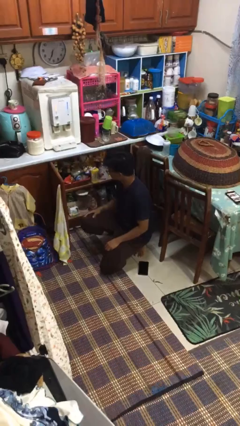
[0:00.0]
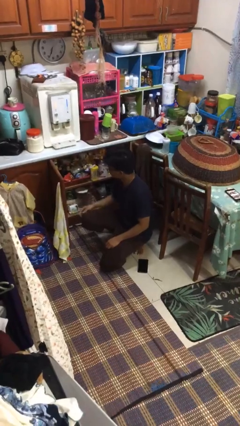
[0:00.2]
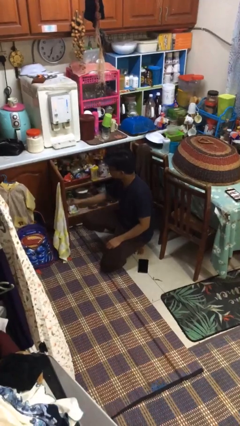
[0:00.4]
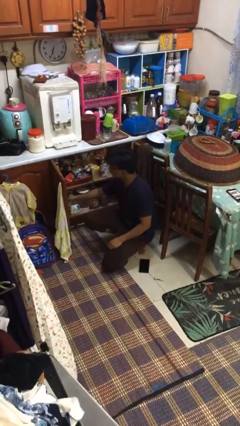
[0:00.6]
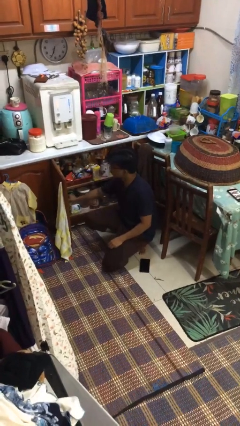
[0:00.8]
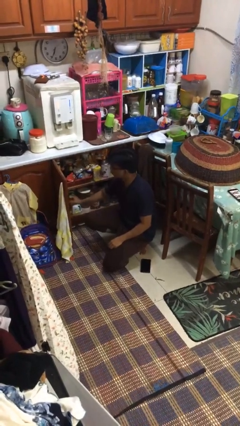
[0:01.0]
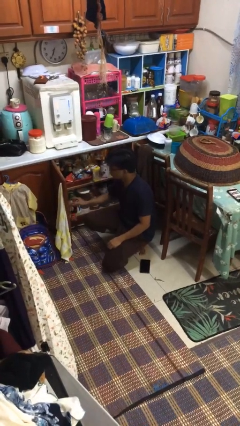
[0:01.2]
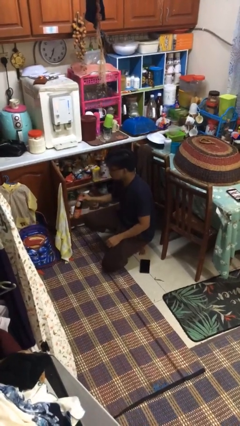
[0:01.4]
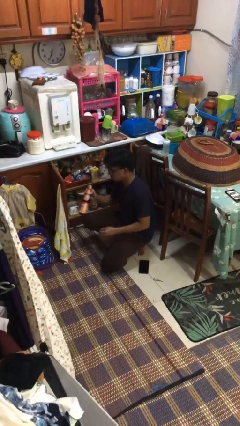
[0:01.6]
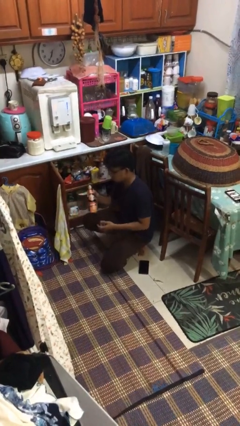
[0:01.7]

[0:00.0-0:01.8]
person takes object from cabinet

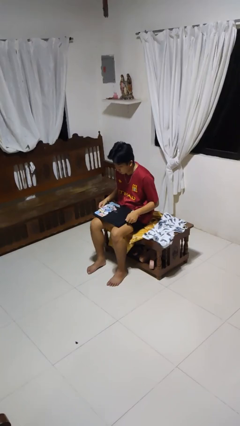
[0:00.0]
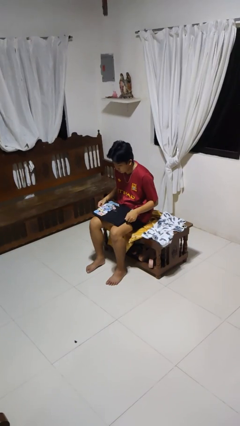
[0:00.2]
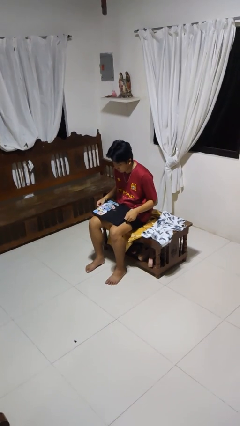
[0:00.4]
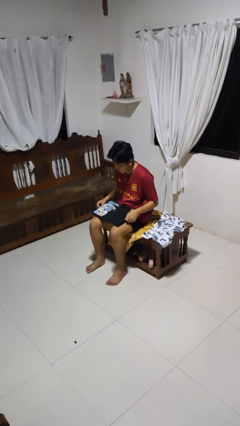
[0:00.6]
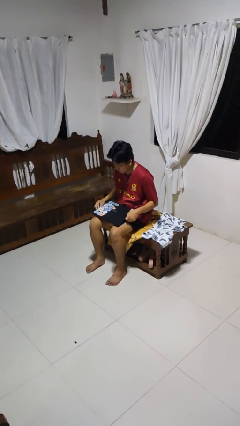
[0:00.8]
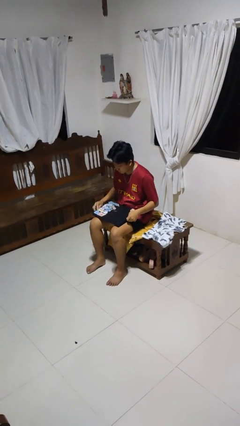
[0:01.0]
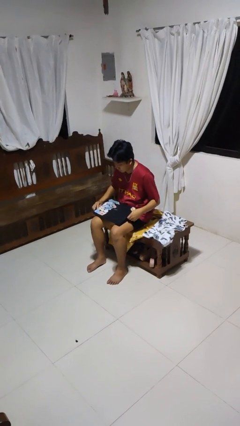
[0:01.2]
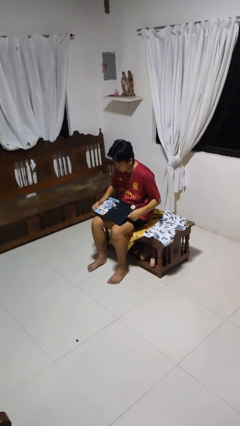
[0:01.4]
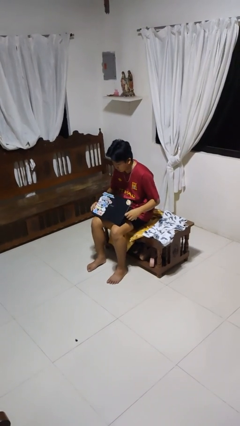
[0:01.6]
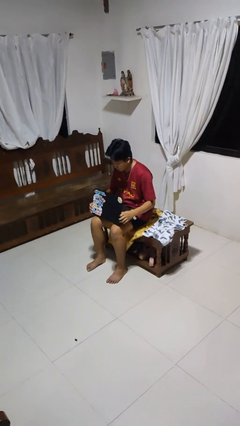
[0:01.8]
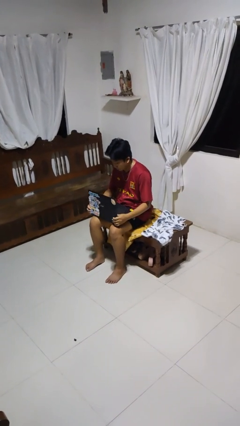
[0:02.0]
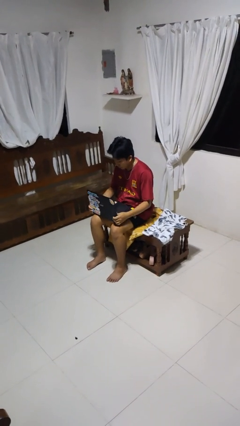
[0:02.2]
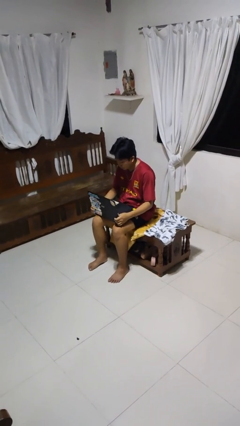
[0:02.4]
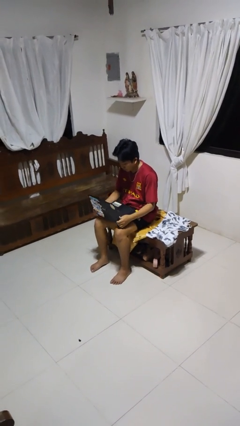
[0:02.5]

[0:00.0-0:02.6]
person opens laptop

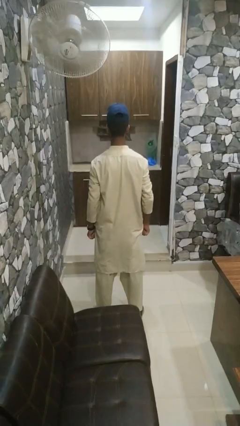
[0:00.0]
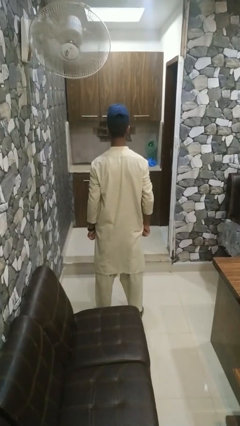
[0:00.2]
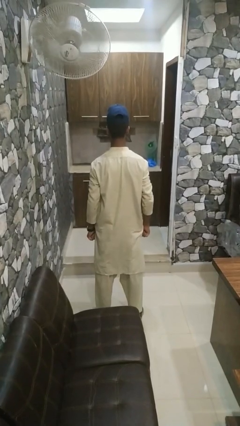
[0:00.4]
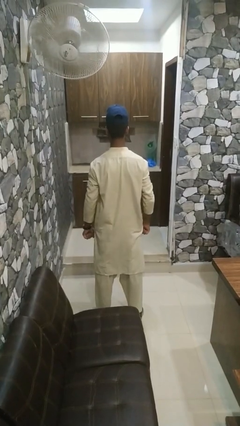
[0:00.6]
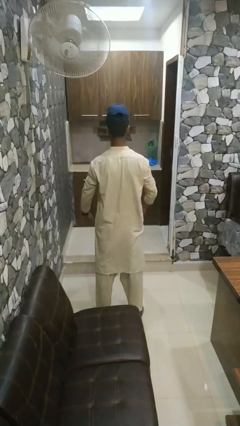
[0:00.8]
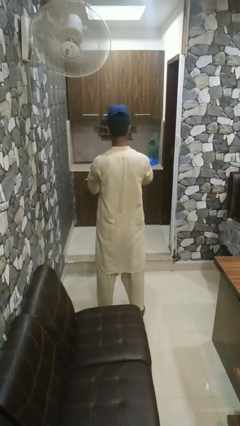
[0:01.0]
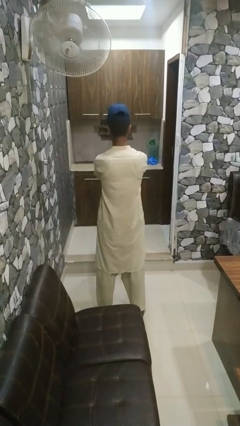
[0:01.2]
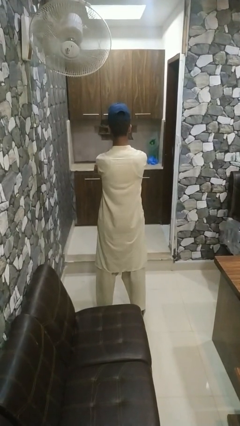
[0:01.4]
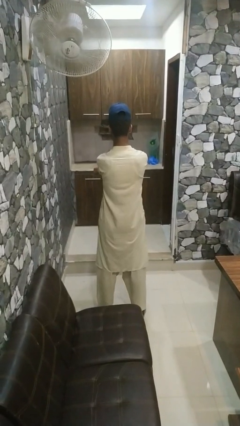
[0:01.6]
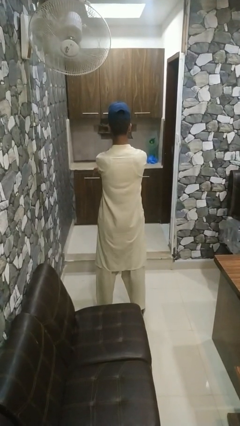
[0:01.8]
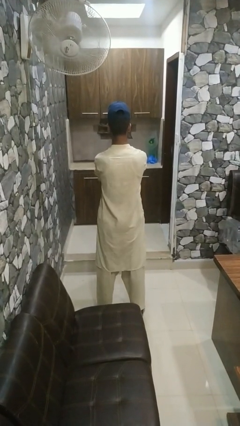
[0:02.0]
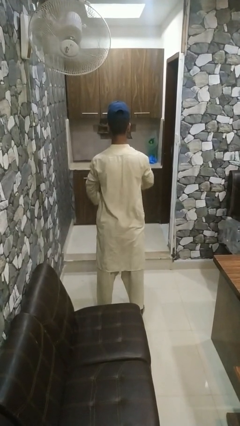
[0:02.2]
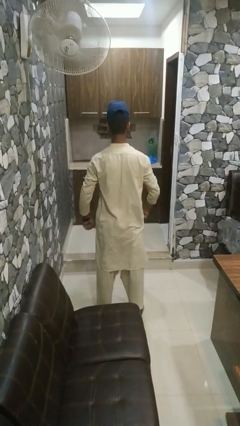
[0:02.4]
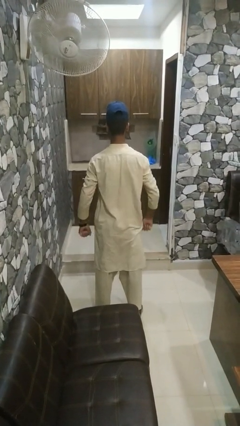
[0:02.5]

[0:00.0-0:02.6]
person crosses arms

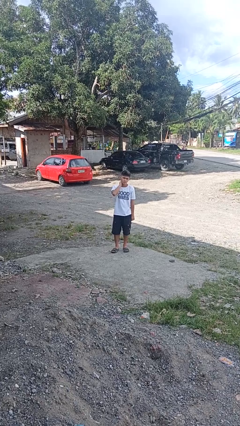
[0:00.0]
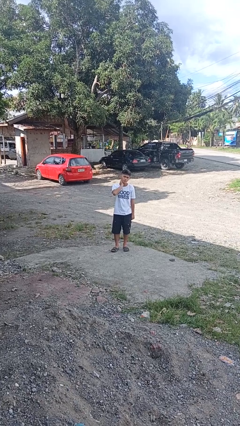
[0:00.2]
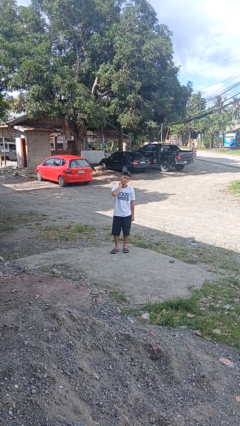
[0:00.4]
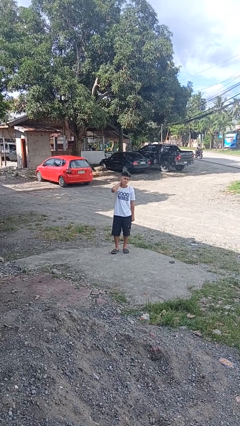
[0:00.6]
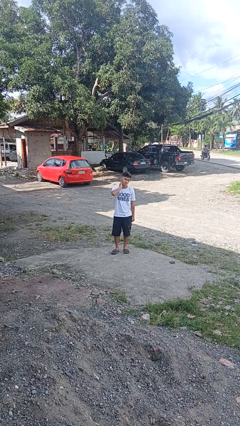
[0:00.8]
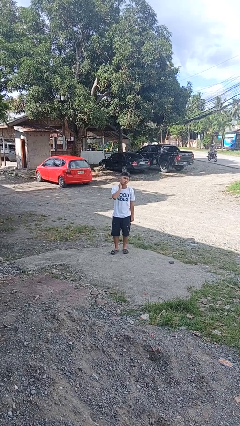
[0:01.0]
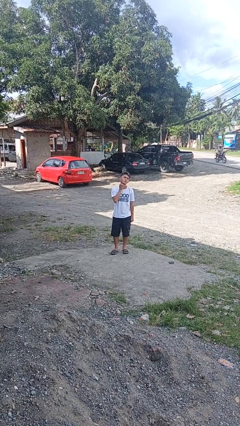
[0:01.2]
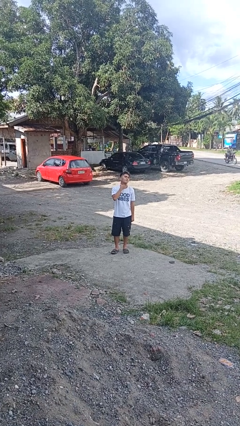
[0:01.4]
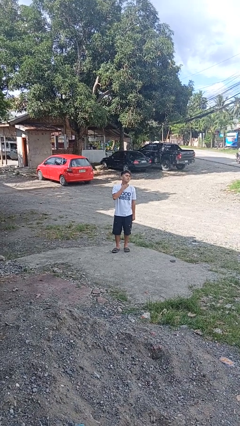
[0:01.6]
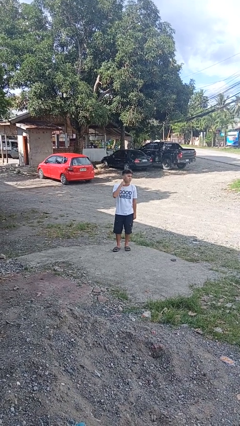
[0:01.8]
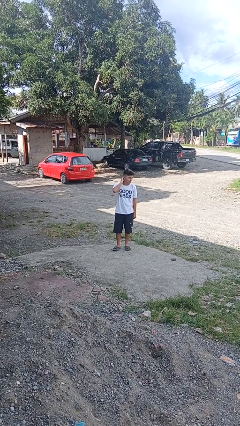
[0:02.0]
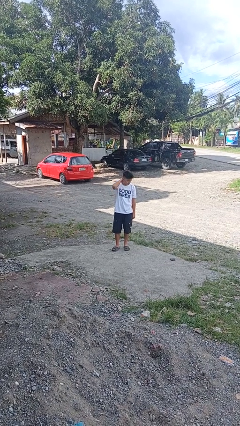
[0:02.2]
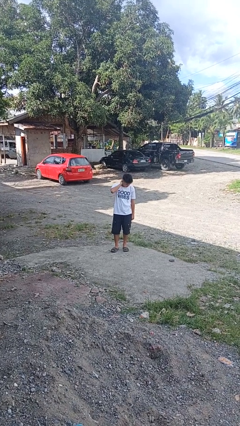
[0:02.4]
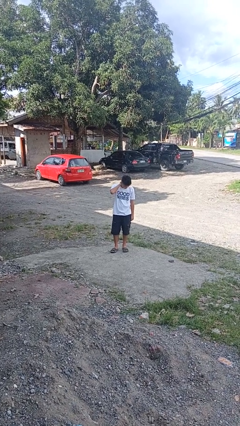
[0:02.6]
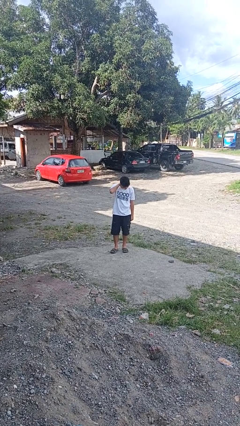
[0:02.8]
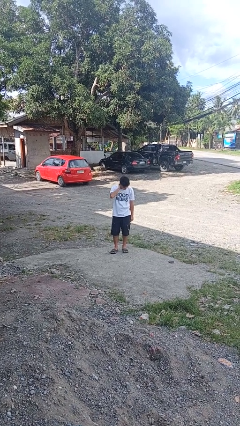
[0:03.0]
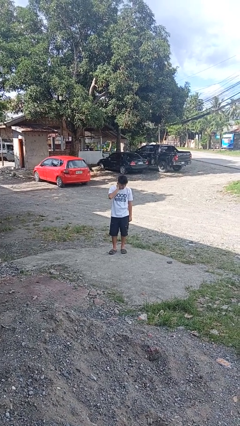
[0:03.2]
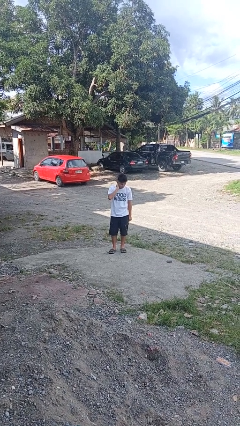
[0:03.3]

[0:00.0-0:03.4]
person rubs neck

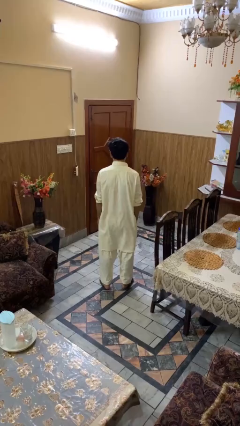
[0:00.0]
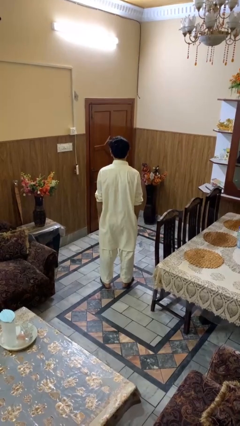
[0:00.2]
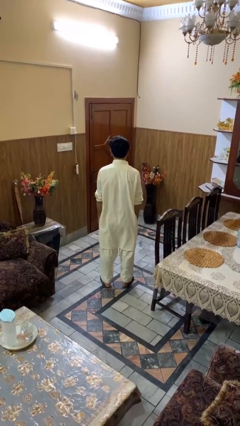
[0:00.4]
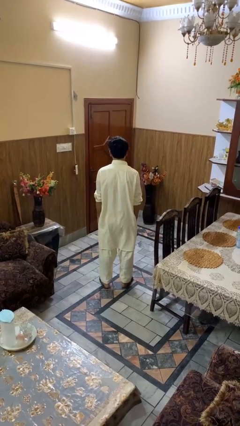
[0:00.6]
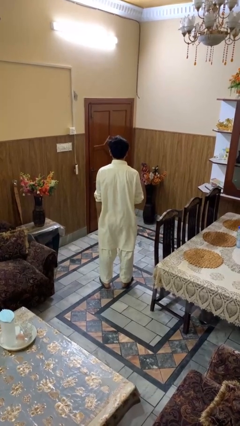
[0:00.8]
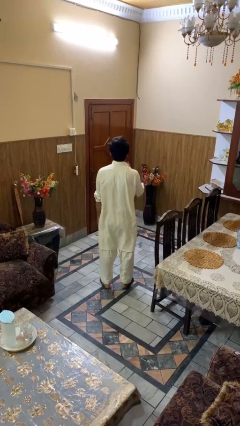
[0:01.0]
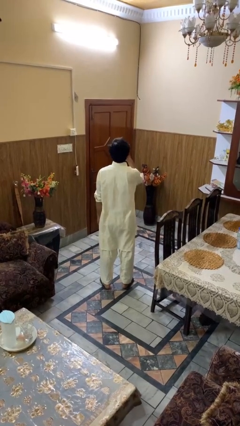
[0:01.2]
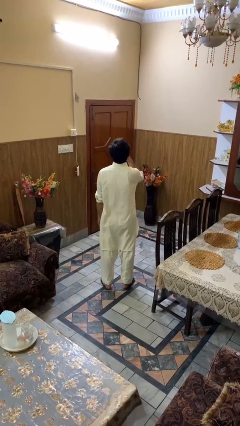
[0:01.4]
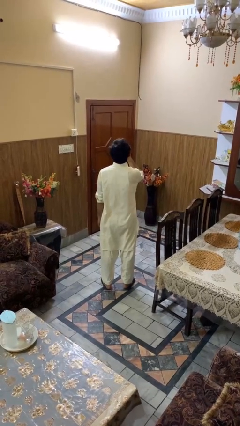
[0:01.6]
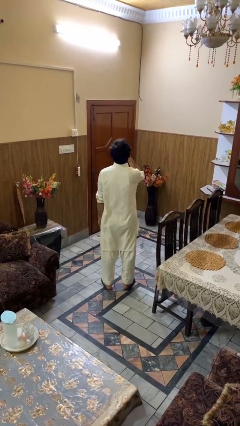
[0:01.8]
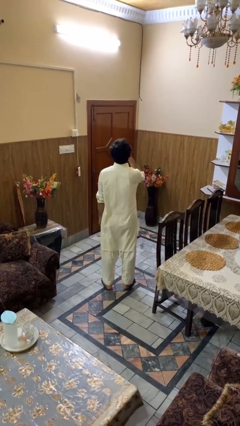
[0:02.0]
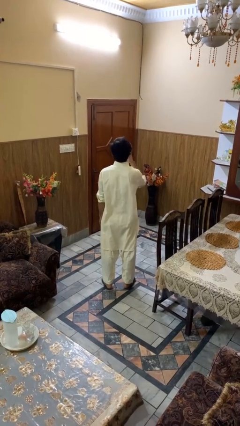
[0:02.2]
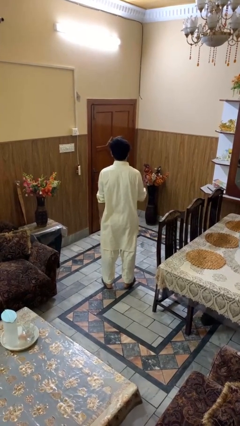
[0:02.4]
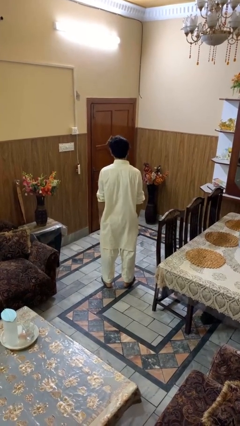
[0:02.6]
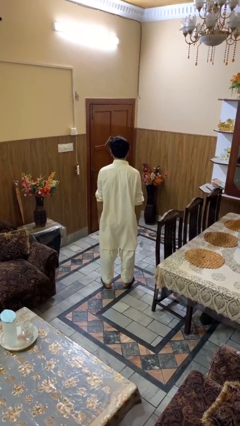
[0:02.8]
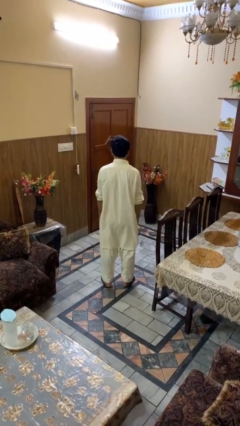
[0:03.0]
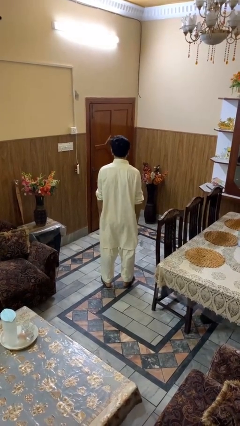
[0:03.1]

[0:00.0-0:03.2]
person yawns

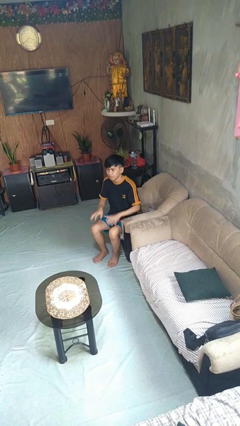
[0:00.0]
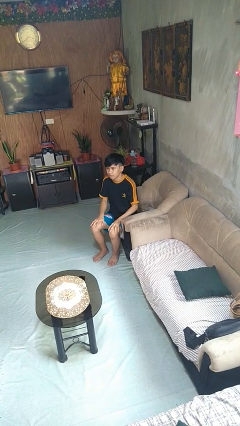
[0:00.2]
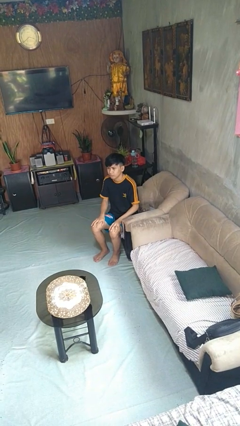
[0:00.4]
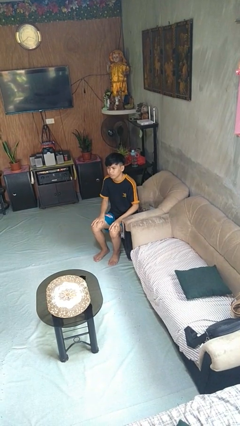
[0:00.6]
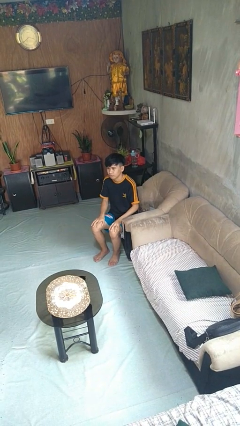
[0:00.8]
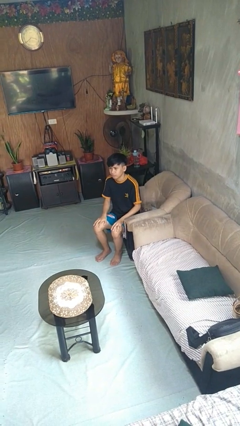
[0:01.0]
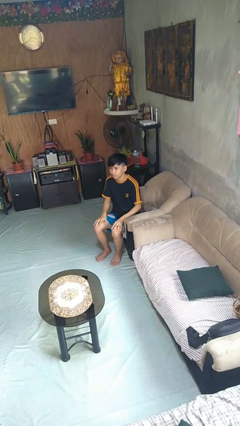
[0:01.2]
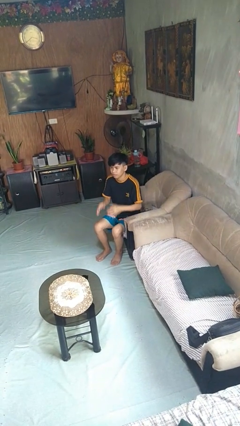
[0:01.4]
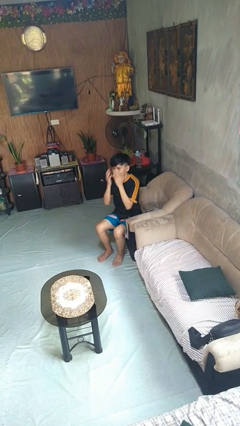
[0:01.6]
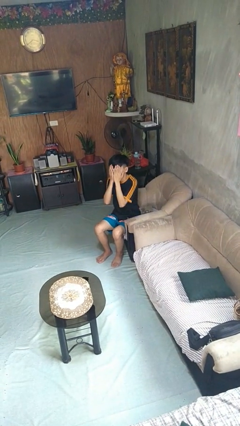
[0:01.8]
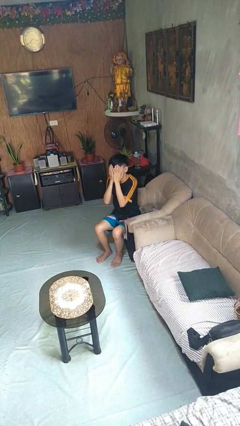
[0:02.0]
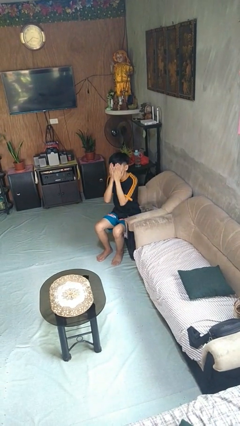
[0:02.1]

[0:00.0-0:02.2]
person covers face with hands

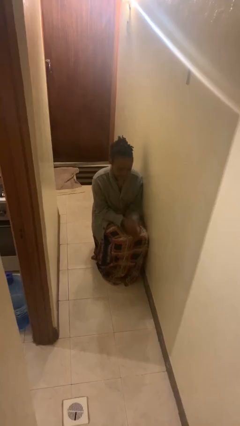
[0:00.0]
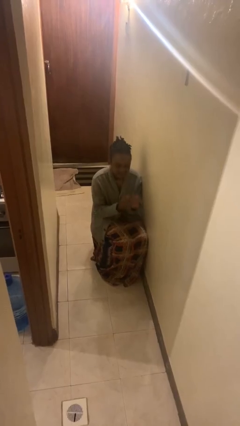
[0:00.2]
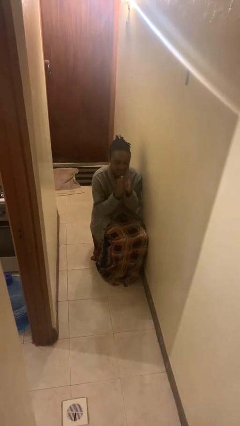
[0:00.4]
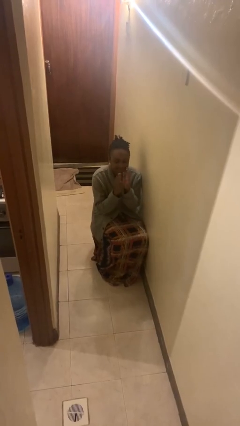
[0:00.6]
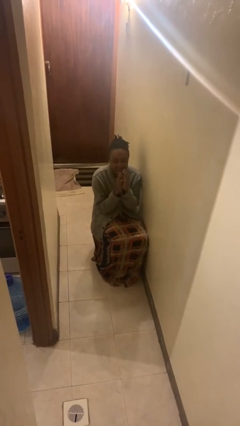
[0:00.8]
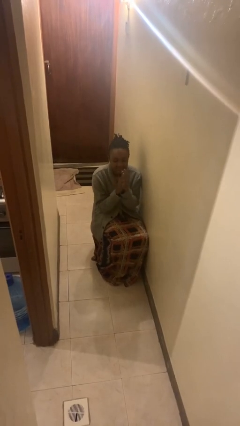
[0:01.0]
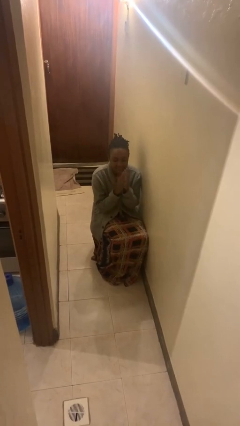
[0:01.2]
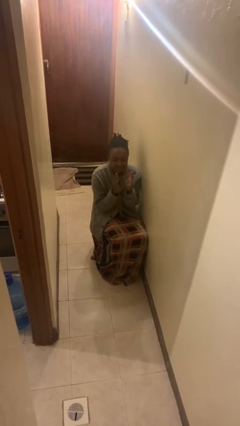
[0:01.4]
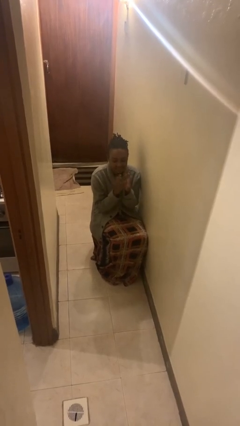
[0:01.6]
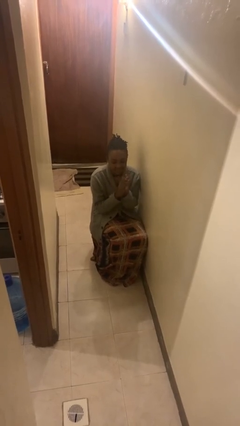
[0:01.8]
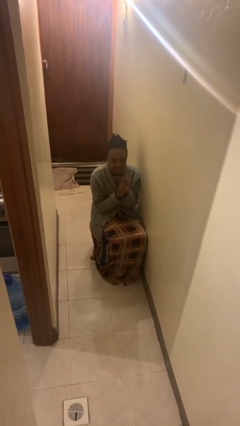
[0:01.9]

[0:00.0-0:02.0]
person claps hands
